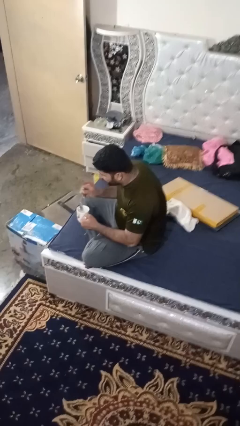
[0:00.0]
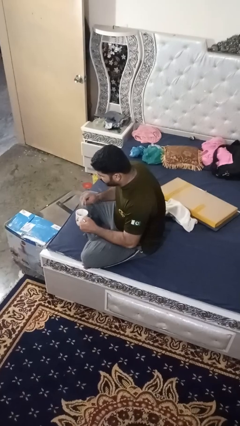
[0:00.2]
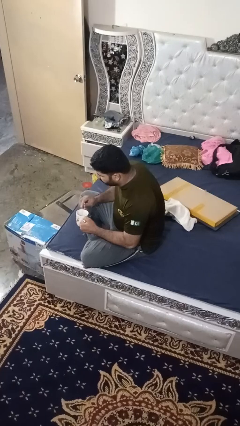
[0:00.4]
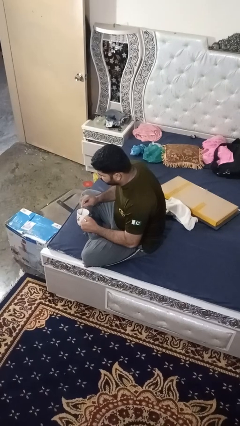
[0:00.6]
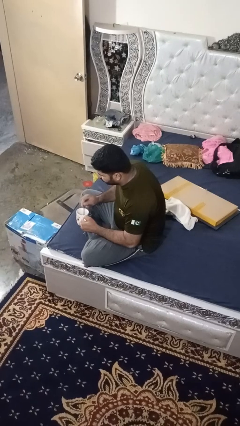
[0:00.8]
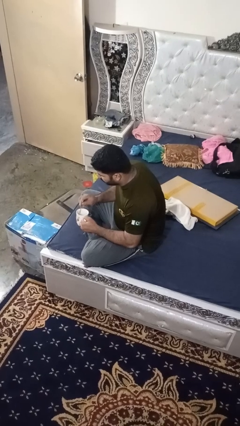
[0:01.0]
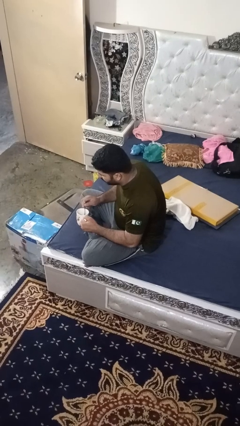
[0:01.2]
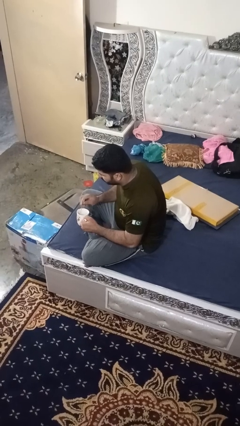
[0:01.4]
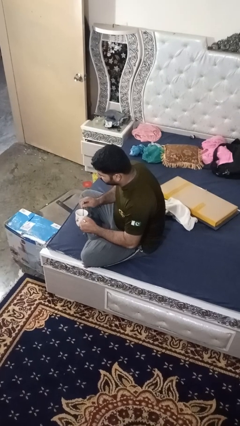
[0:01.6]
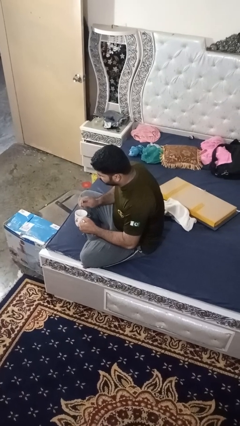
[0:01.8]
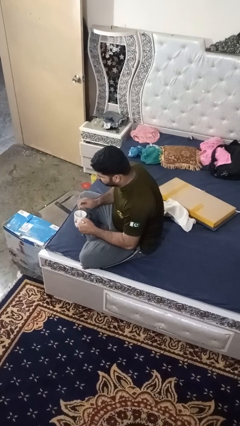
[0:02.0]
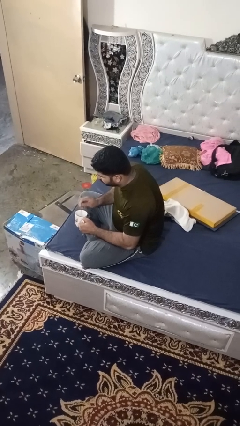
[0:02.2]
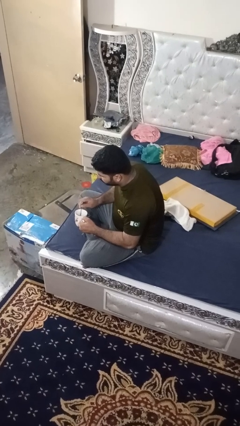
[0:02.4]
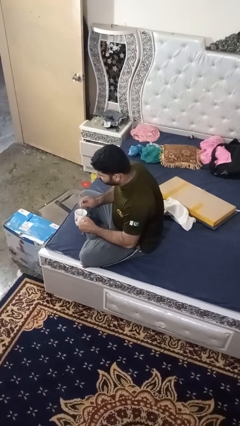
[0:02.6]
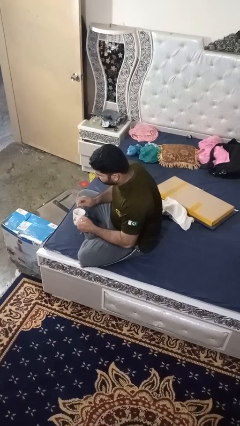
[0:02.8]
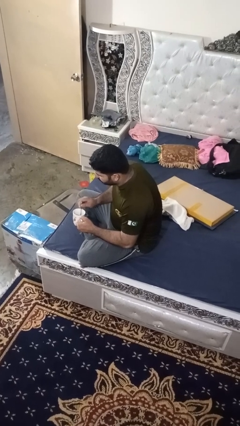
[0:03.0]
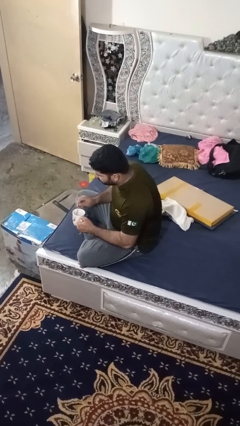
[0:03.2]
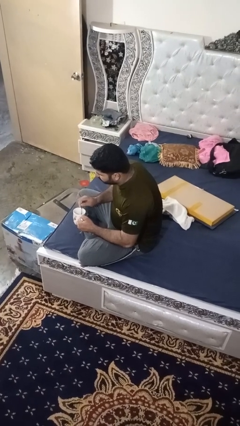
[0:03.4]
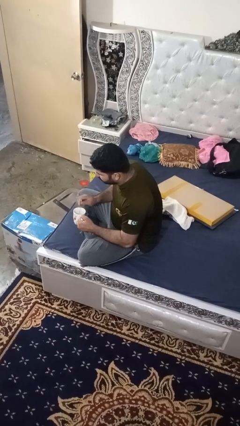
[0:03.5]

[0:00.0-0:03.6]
person stirs mug

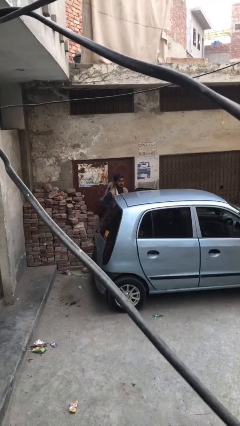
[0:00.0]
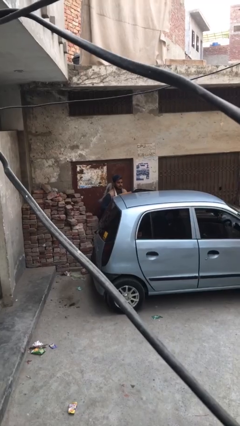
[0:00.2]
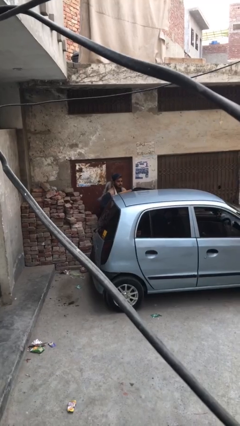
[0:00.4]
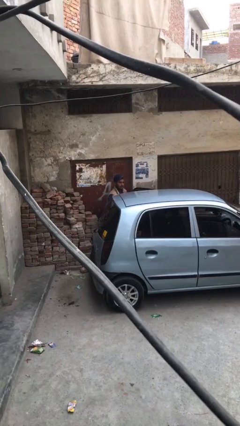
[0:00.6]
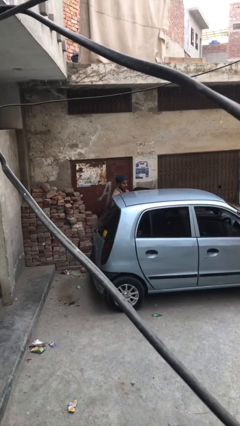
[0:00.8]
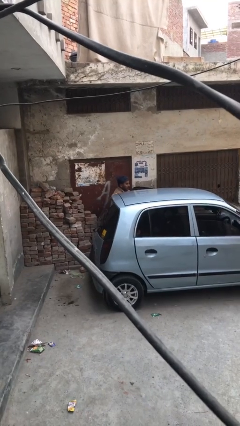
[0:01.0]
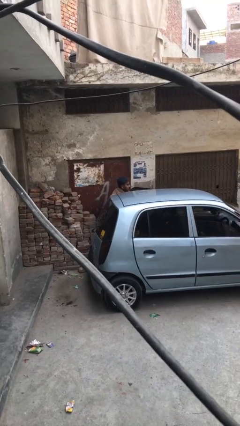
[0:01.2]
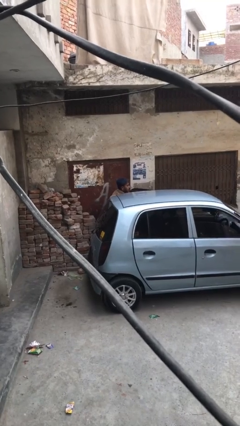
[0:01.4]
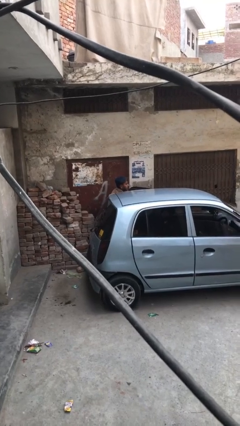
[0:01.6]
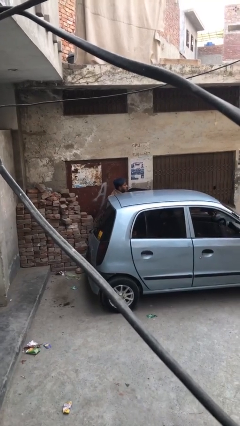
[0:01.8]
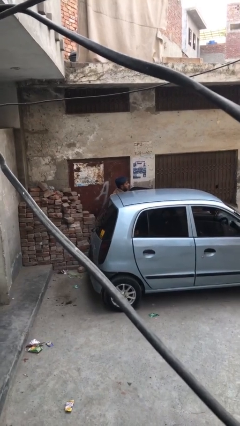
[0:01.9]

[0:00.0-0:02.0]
person loads car

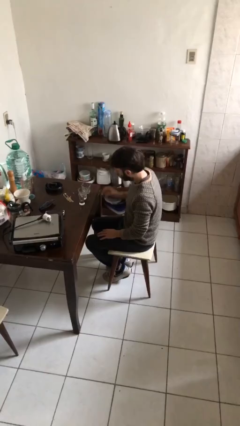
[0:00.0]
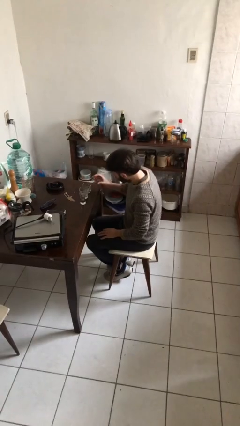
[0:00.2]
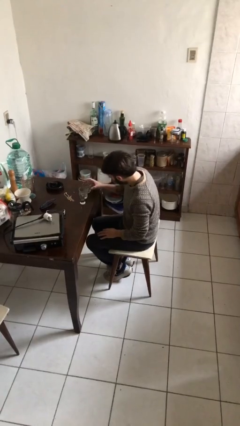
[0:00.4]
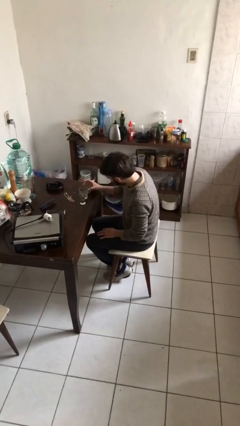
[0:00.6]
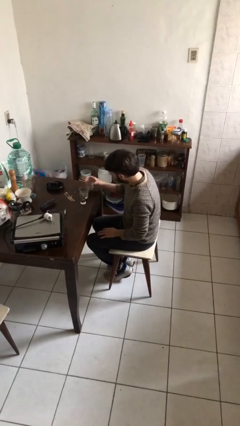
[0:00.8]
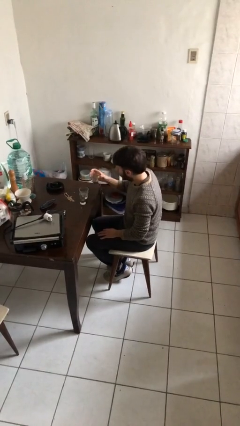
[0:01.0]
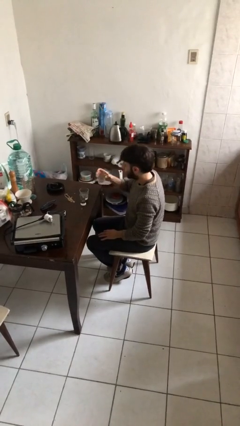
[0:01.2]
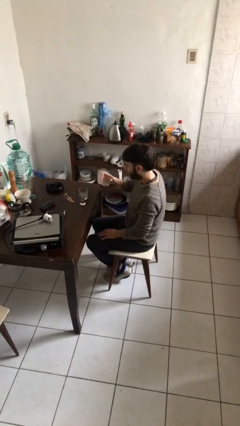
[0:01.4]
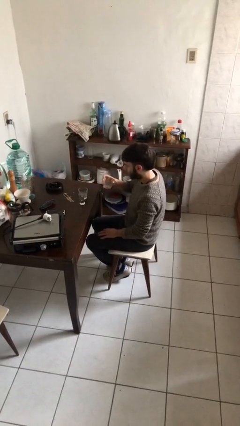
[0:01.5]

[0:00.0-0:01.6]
person picks up object from table

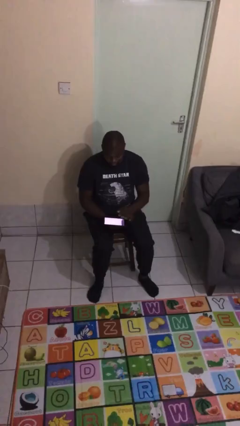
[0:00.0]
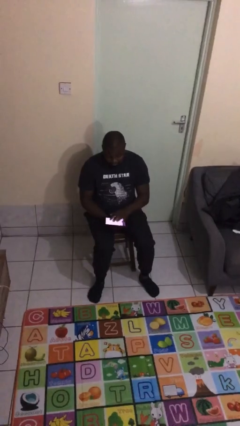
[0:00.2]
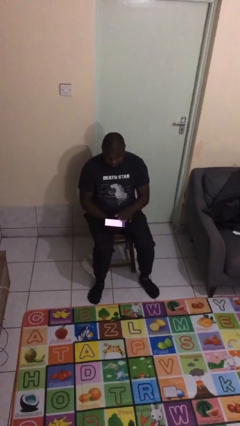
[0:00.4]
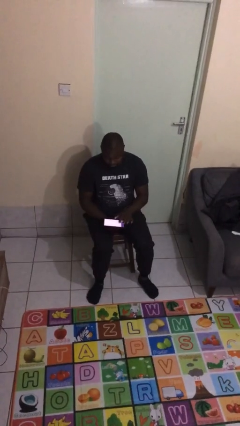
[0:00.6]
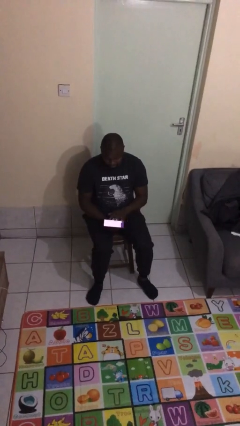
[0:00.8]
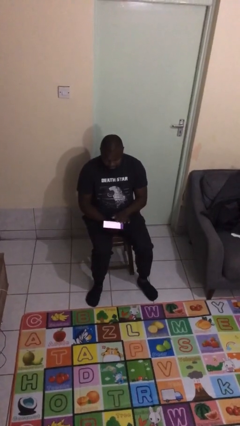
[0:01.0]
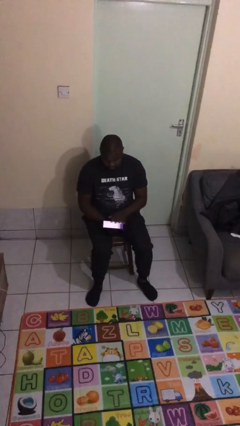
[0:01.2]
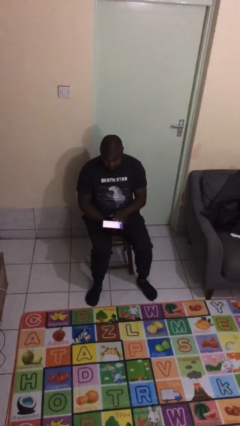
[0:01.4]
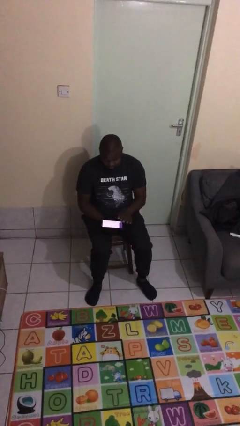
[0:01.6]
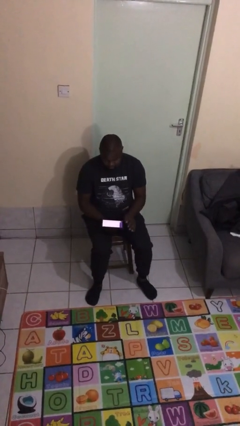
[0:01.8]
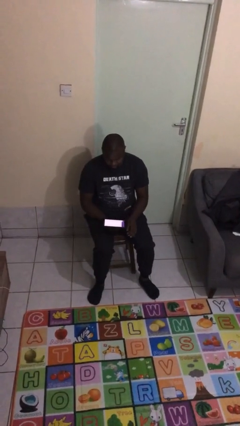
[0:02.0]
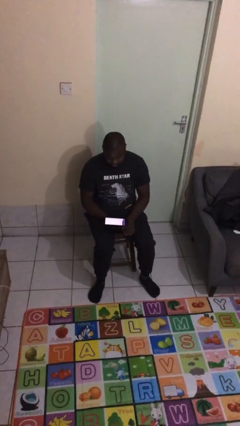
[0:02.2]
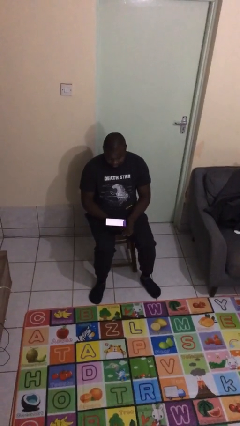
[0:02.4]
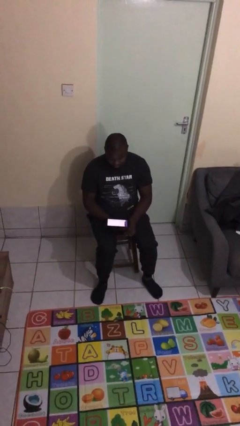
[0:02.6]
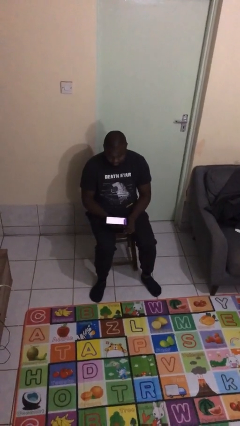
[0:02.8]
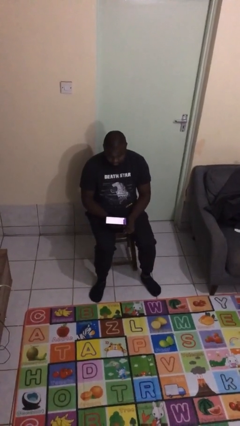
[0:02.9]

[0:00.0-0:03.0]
person interacts with tablet

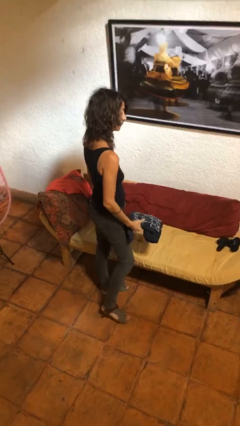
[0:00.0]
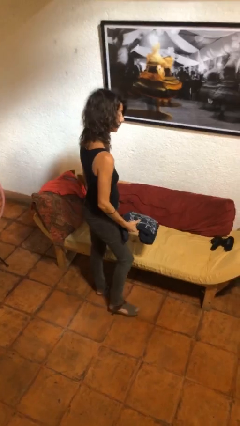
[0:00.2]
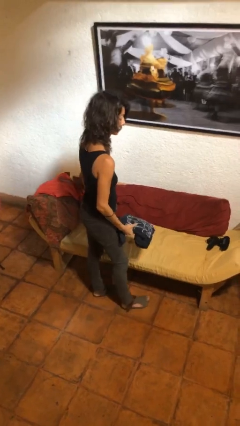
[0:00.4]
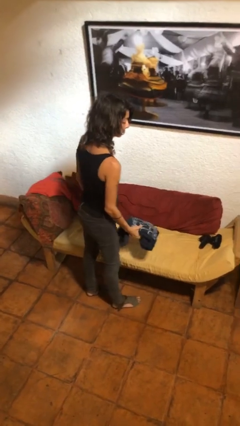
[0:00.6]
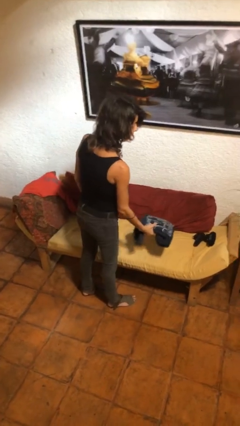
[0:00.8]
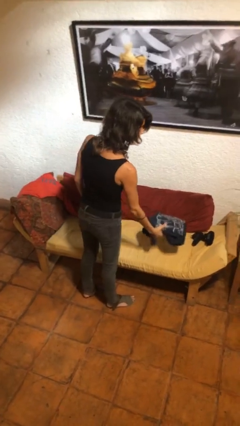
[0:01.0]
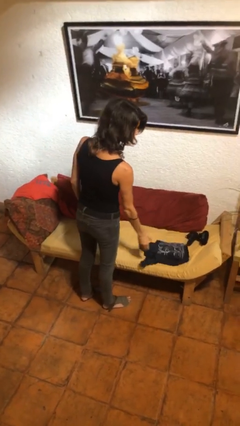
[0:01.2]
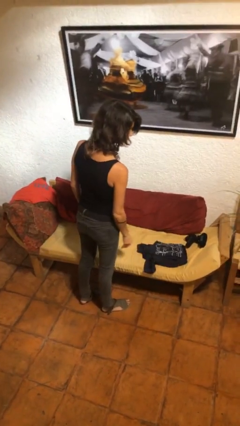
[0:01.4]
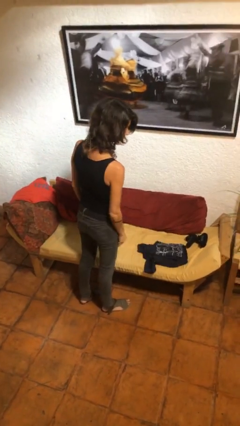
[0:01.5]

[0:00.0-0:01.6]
person puts down object on couch

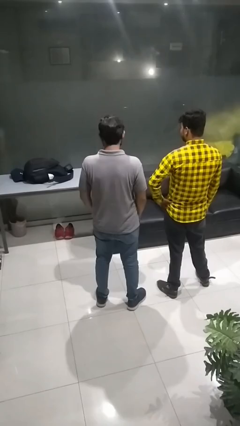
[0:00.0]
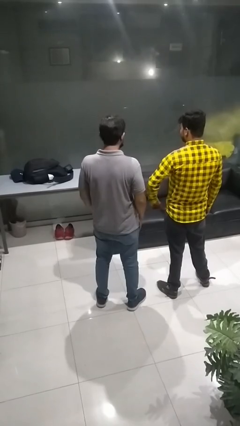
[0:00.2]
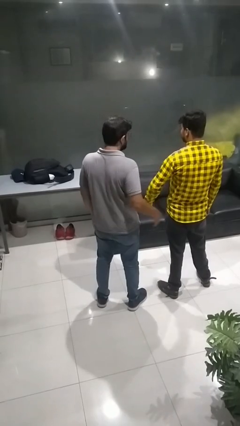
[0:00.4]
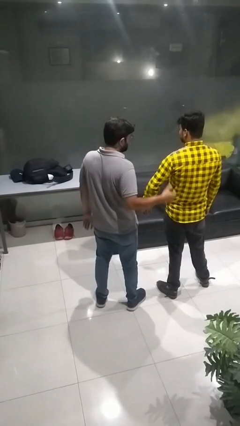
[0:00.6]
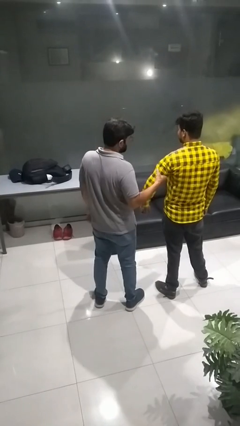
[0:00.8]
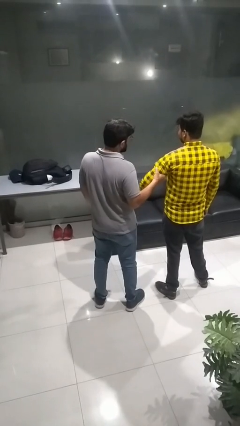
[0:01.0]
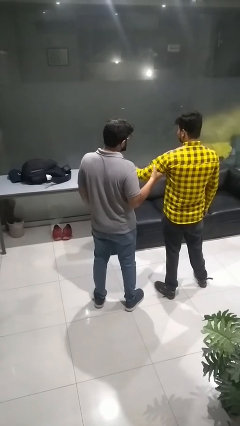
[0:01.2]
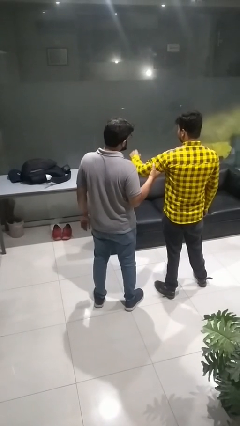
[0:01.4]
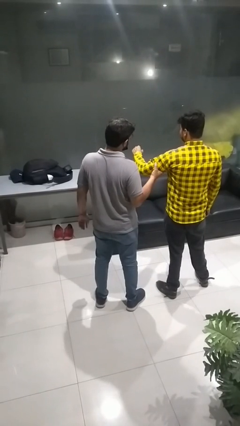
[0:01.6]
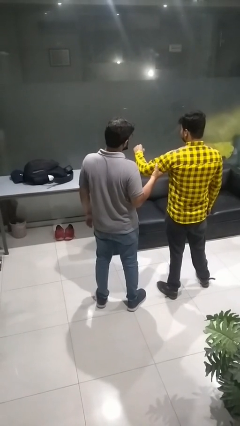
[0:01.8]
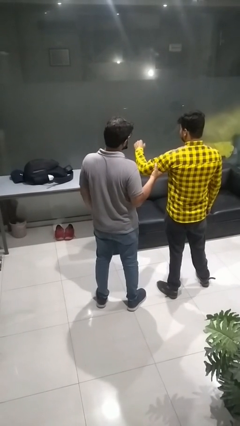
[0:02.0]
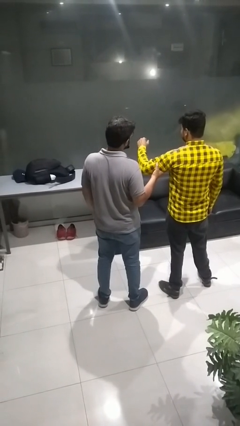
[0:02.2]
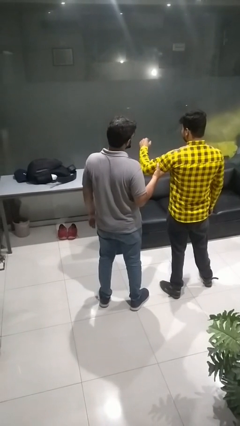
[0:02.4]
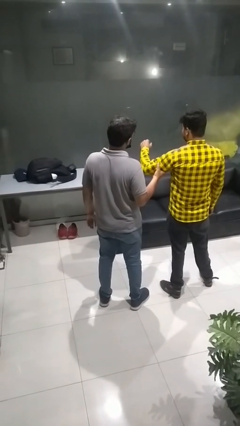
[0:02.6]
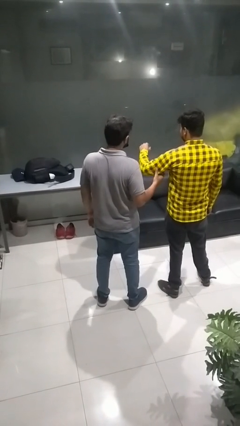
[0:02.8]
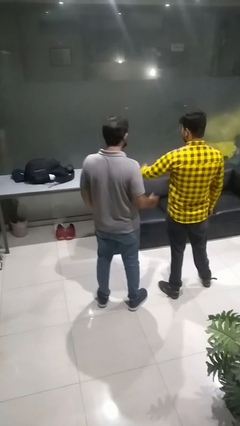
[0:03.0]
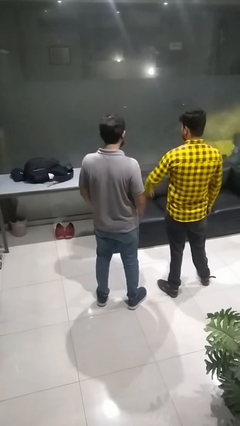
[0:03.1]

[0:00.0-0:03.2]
person grabs person by bicep

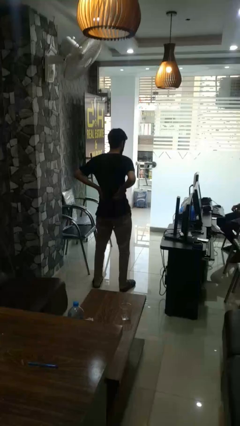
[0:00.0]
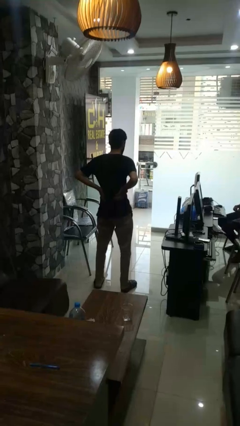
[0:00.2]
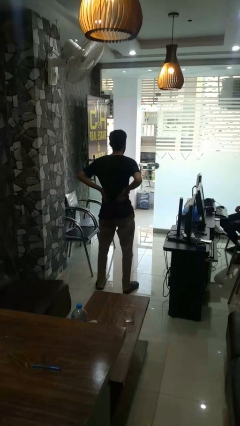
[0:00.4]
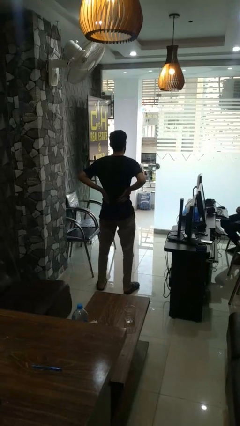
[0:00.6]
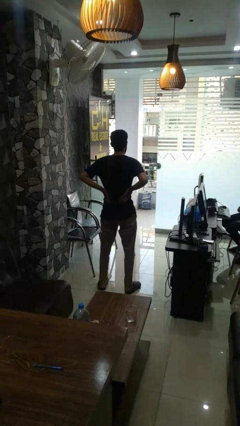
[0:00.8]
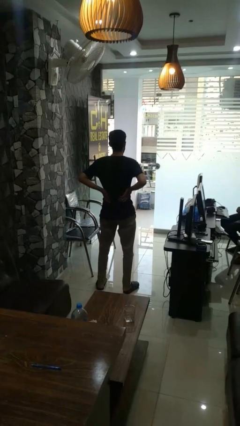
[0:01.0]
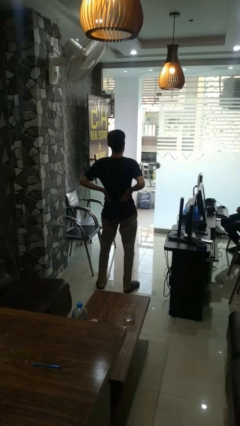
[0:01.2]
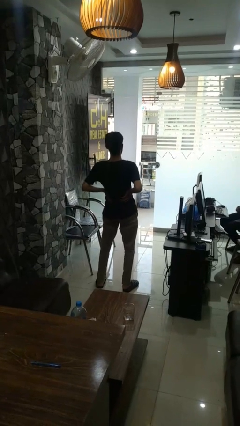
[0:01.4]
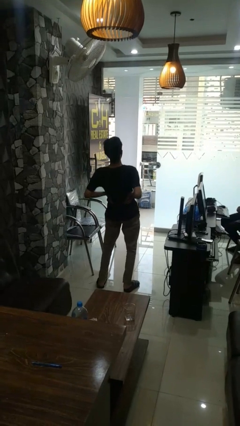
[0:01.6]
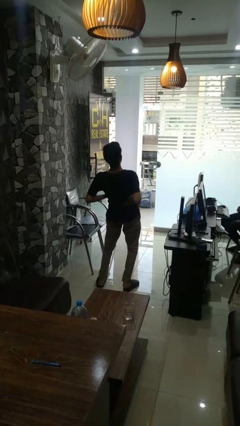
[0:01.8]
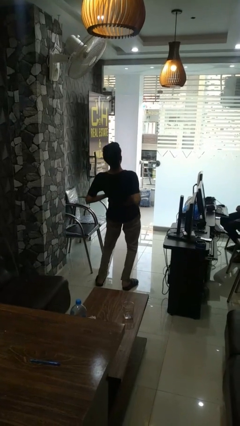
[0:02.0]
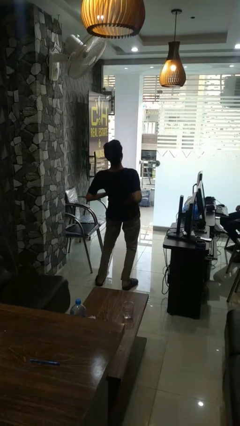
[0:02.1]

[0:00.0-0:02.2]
person stretches back
